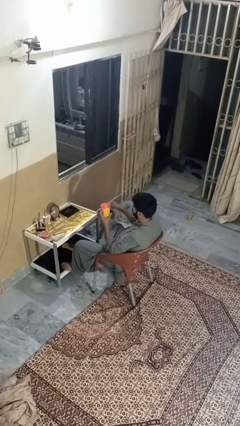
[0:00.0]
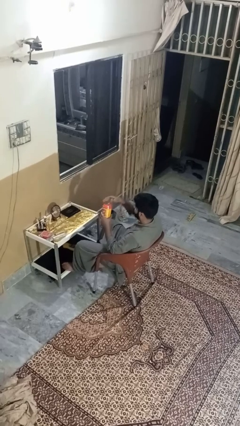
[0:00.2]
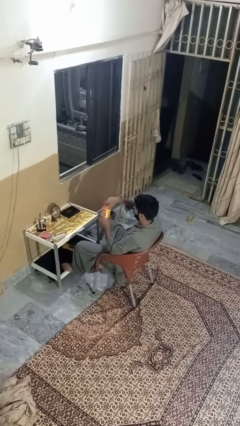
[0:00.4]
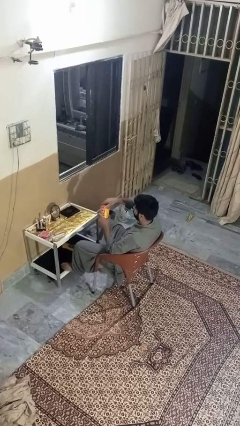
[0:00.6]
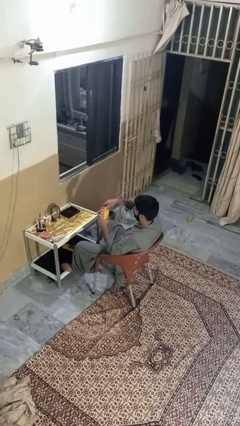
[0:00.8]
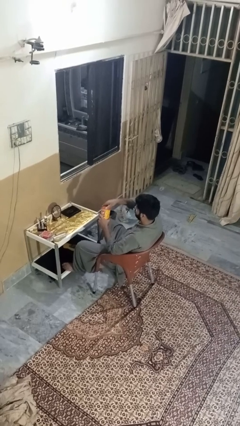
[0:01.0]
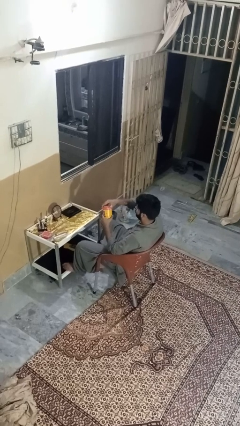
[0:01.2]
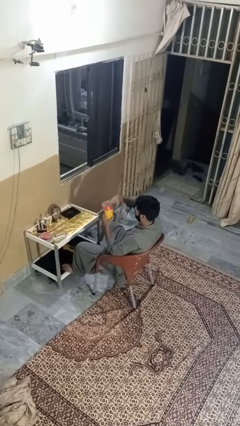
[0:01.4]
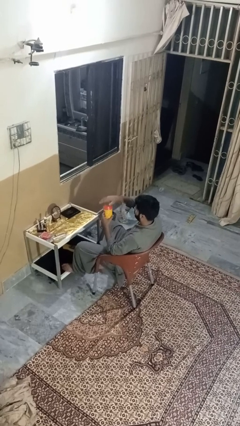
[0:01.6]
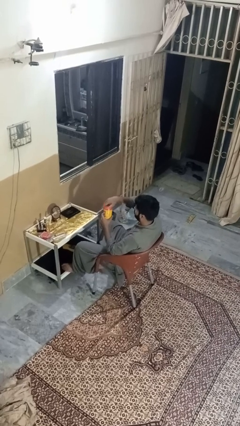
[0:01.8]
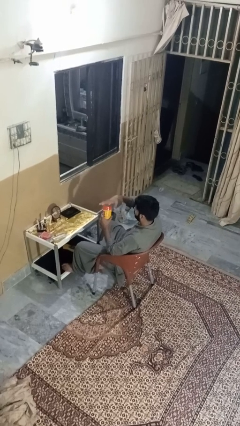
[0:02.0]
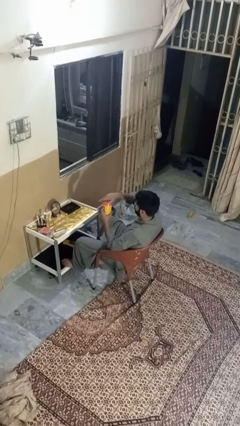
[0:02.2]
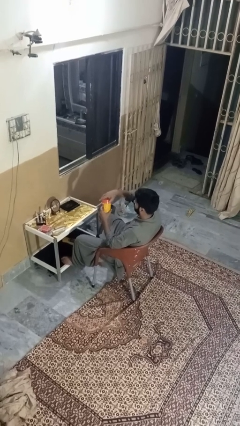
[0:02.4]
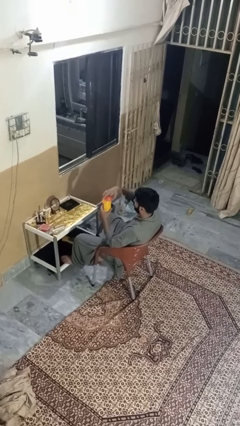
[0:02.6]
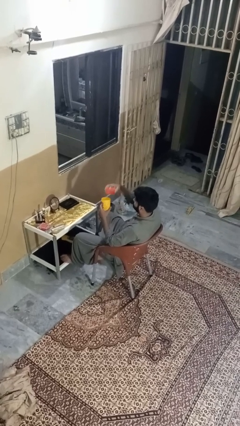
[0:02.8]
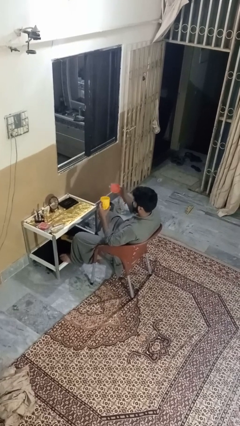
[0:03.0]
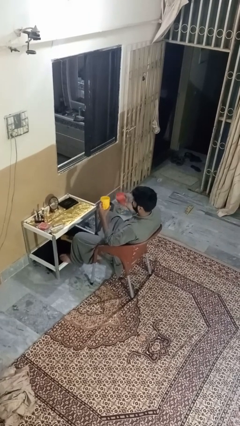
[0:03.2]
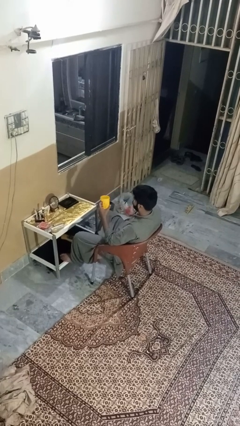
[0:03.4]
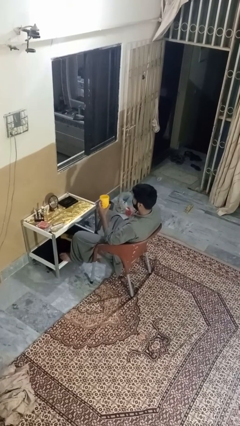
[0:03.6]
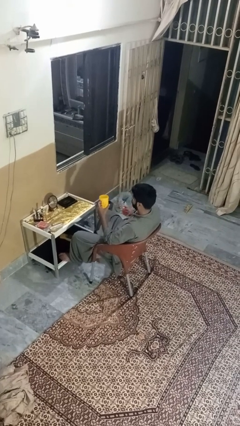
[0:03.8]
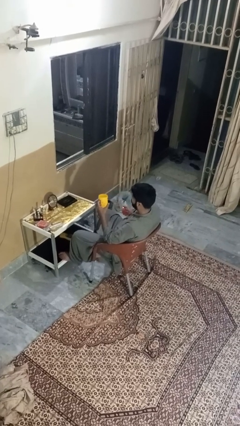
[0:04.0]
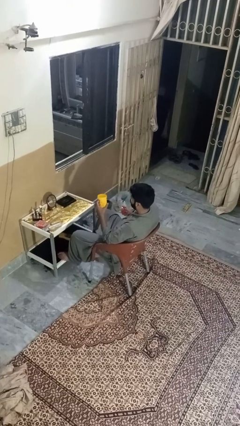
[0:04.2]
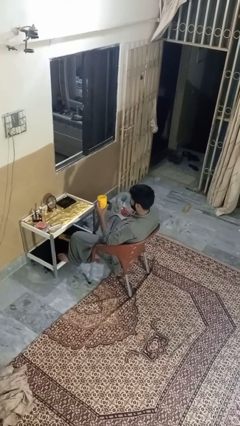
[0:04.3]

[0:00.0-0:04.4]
person opens jar

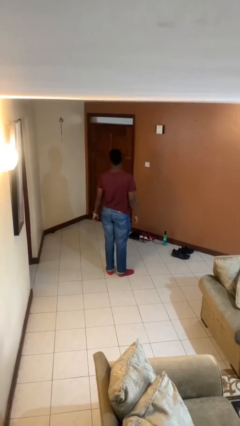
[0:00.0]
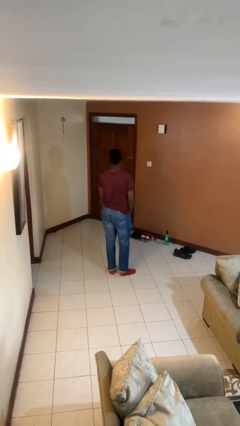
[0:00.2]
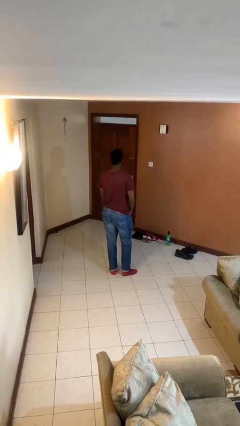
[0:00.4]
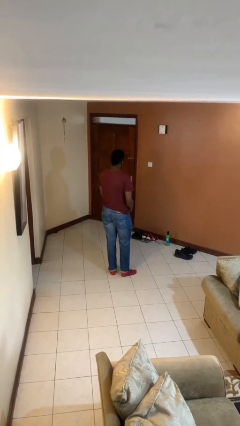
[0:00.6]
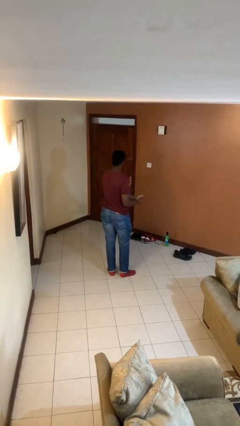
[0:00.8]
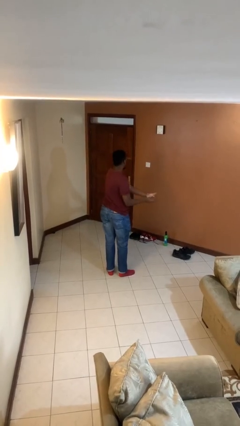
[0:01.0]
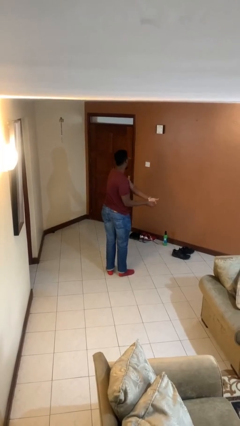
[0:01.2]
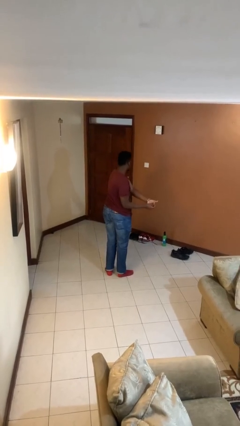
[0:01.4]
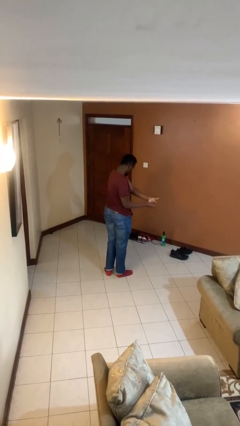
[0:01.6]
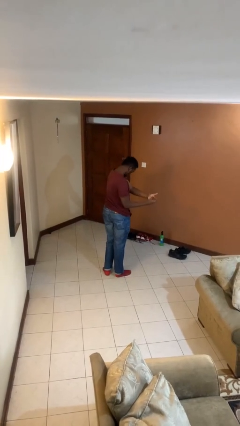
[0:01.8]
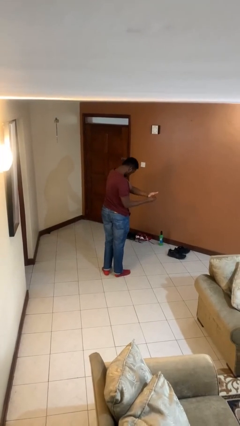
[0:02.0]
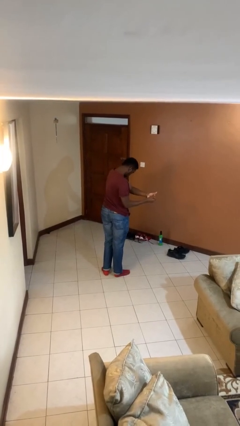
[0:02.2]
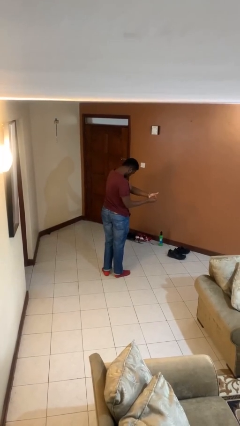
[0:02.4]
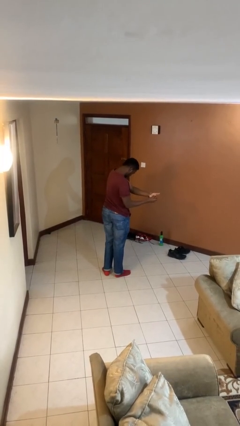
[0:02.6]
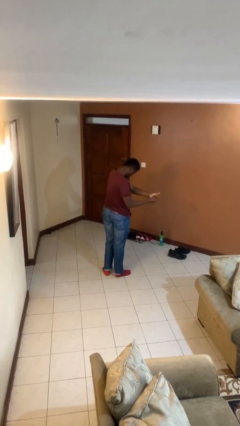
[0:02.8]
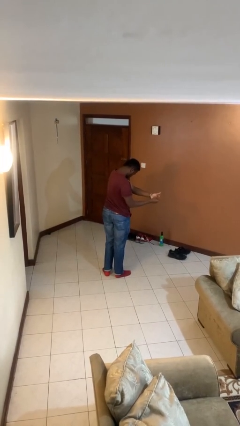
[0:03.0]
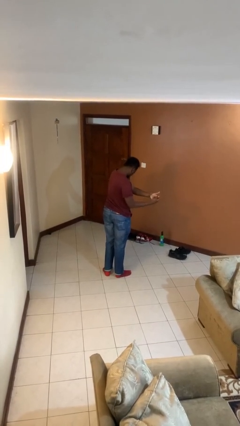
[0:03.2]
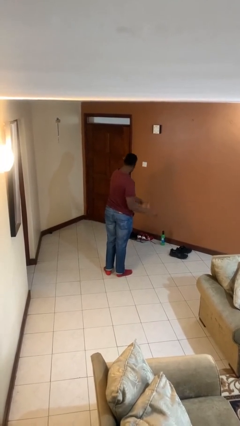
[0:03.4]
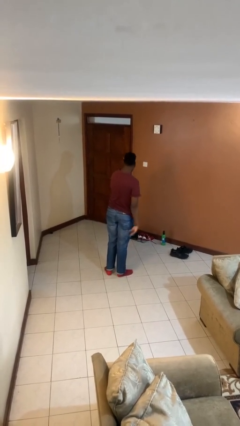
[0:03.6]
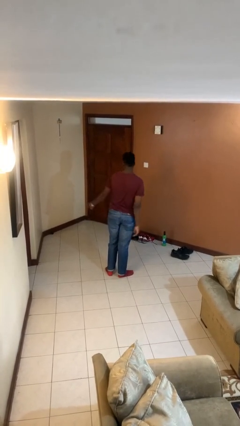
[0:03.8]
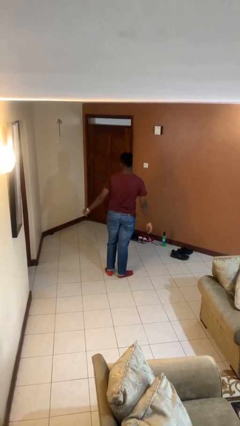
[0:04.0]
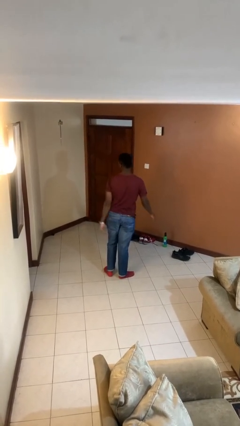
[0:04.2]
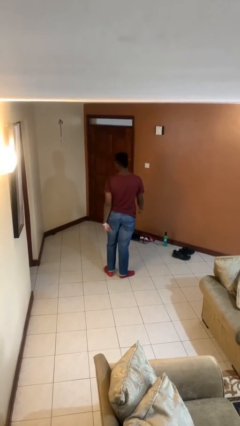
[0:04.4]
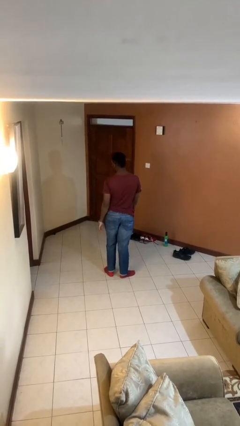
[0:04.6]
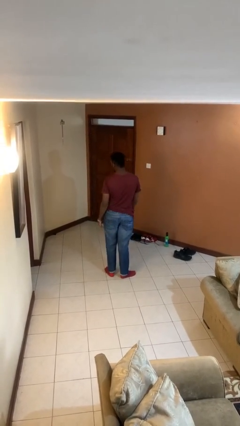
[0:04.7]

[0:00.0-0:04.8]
person cracks knuckles

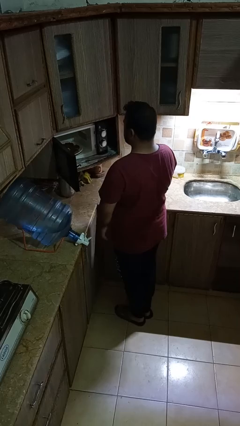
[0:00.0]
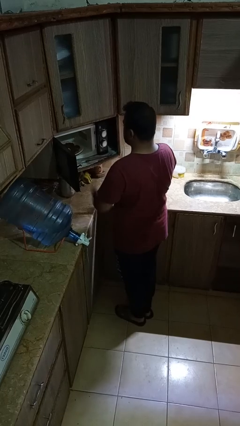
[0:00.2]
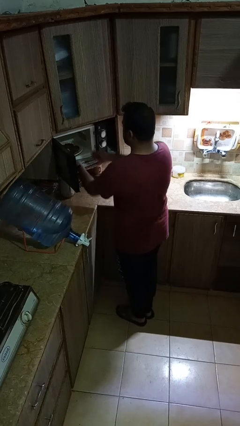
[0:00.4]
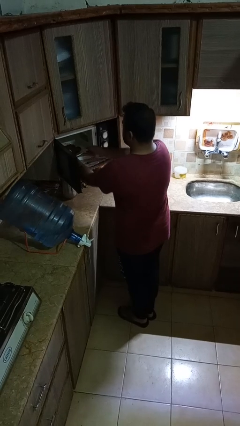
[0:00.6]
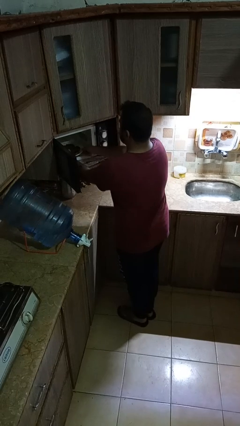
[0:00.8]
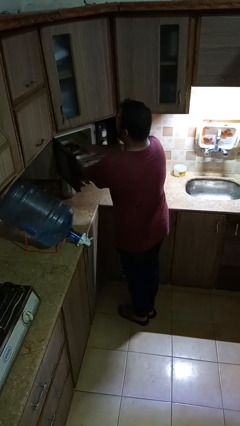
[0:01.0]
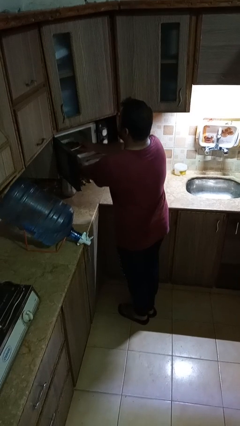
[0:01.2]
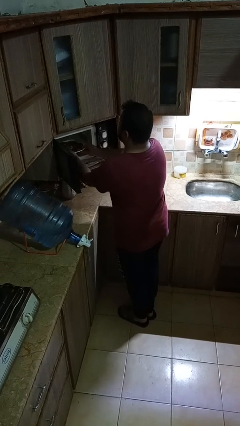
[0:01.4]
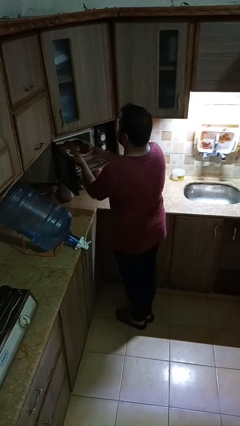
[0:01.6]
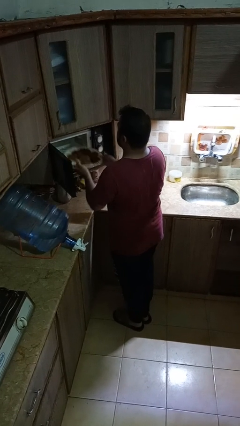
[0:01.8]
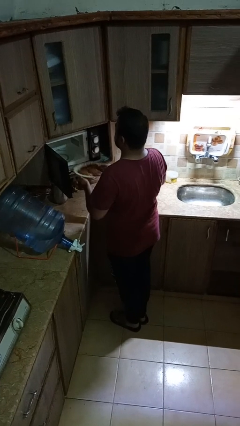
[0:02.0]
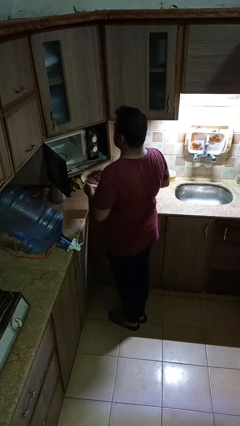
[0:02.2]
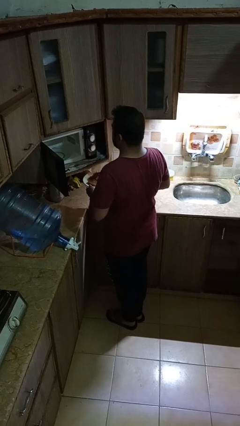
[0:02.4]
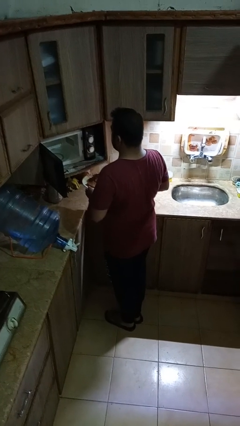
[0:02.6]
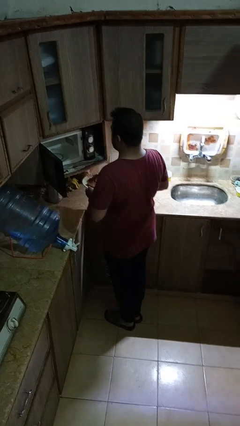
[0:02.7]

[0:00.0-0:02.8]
person takes object from microwave

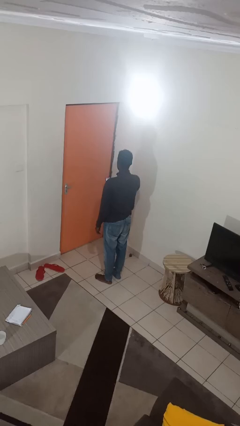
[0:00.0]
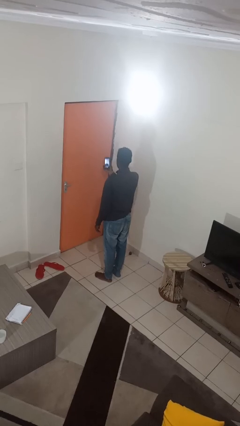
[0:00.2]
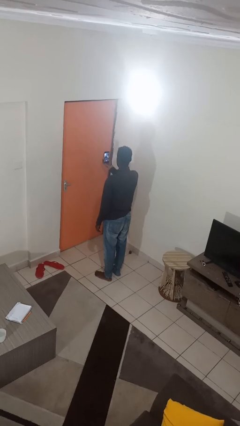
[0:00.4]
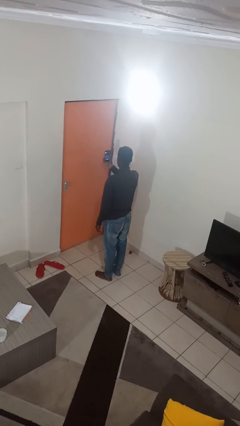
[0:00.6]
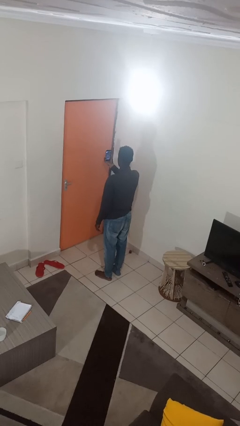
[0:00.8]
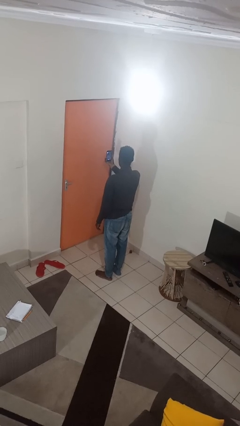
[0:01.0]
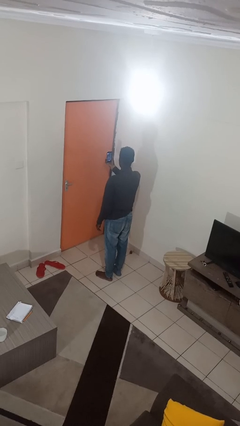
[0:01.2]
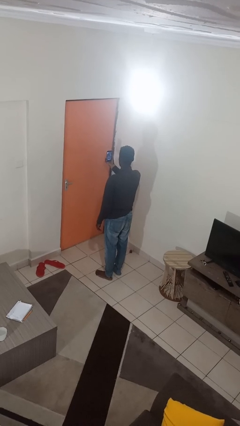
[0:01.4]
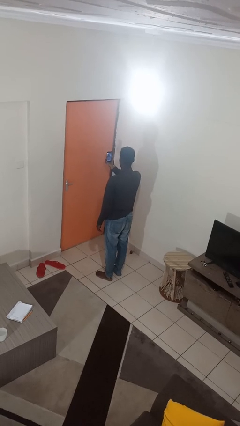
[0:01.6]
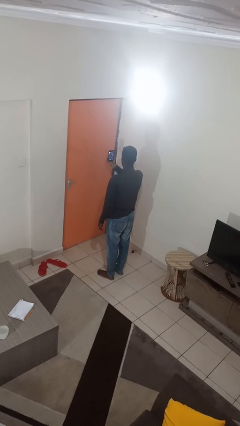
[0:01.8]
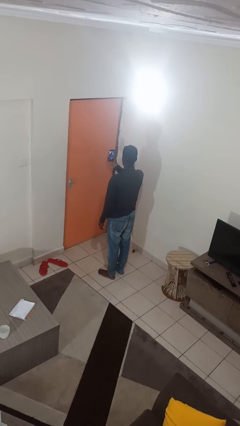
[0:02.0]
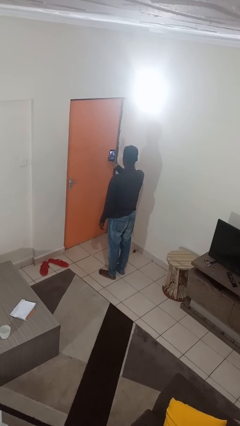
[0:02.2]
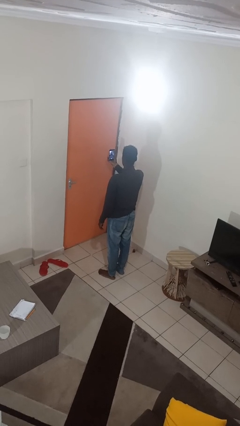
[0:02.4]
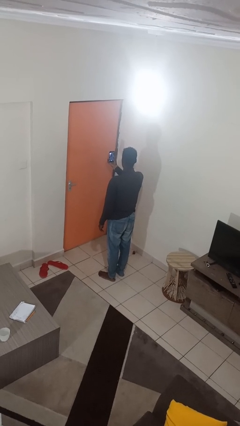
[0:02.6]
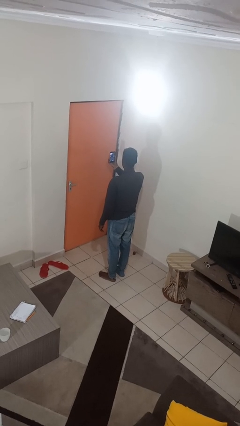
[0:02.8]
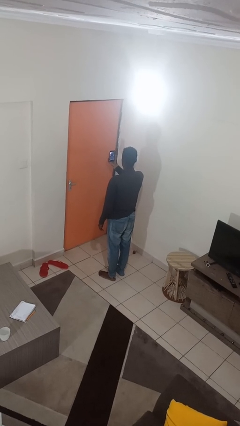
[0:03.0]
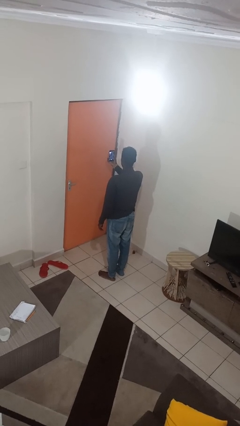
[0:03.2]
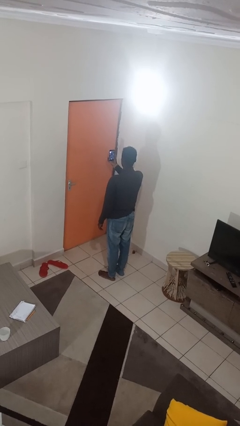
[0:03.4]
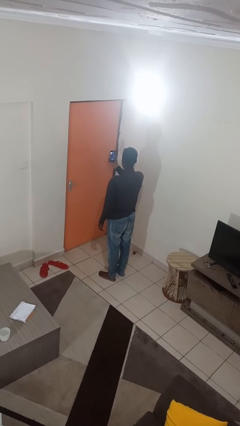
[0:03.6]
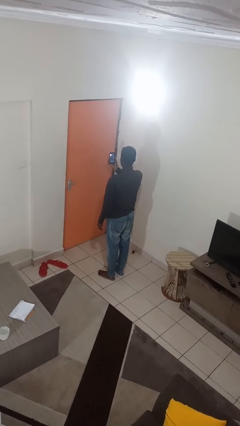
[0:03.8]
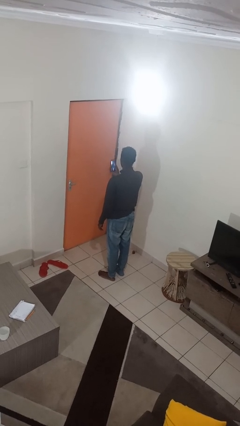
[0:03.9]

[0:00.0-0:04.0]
person takes selfie

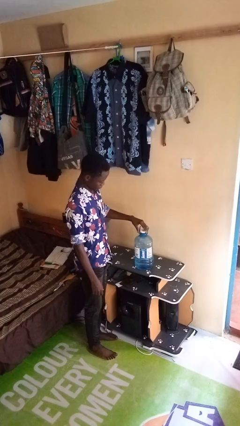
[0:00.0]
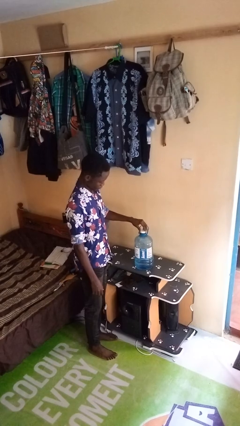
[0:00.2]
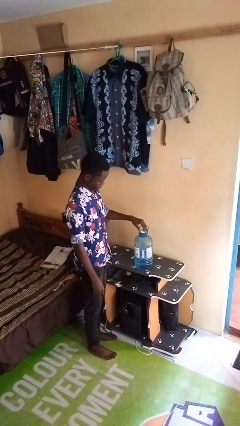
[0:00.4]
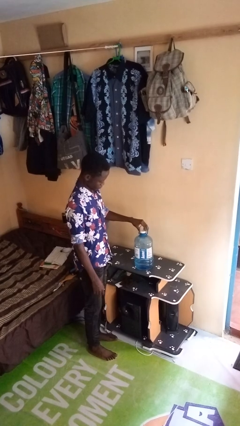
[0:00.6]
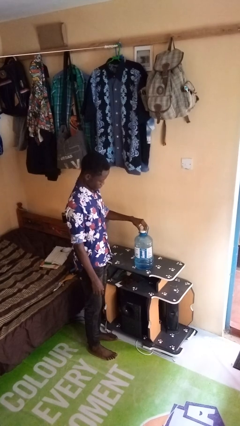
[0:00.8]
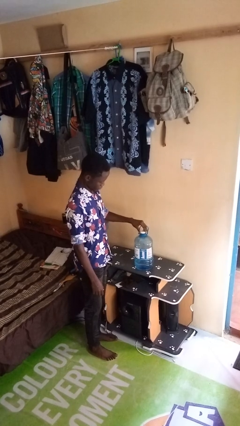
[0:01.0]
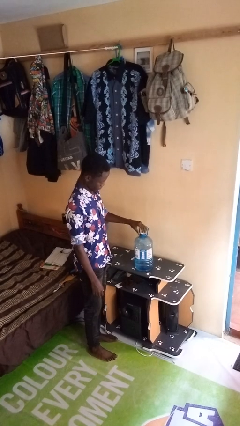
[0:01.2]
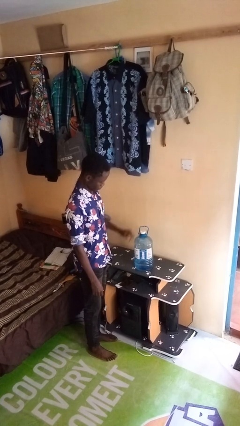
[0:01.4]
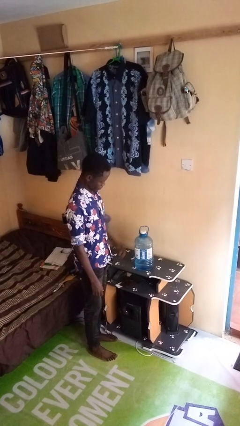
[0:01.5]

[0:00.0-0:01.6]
person screws lid to bottle

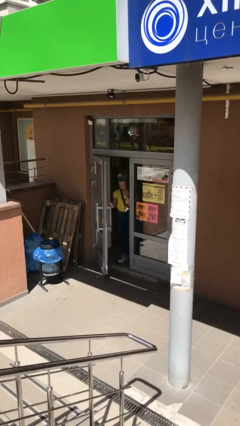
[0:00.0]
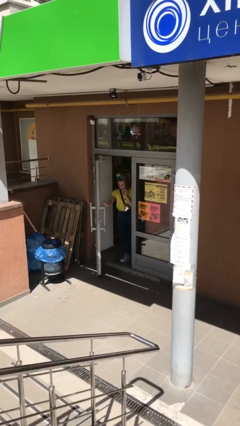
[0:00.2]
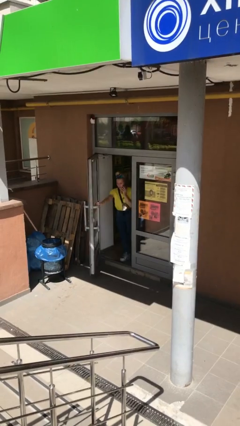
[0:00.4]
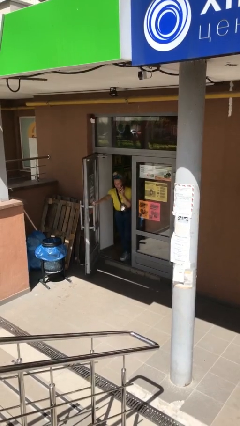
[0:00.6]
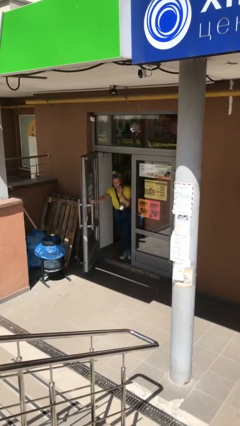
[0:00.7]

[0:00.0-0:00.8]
person opens facility door
